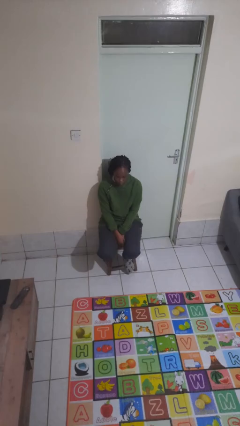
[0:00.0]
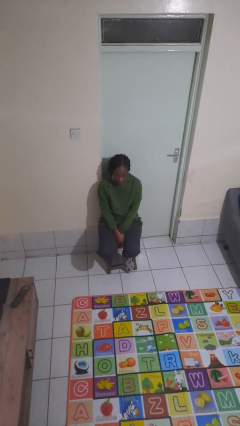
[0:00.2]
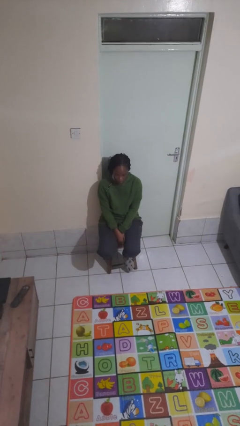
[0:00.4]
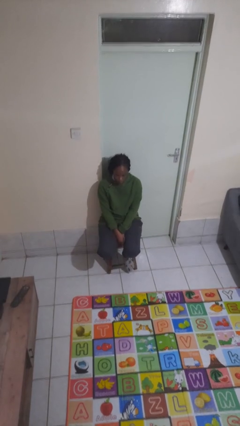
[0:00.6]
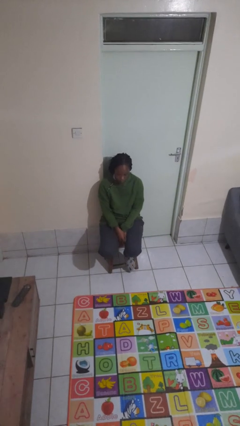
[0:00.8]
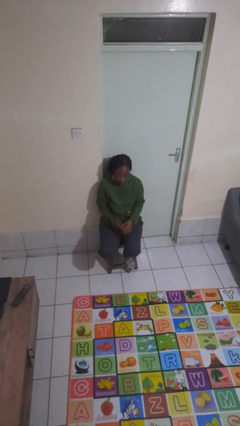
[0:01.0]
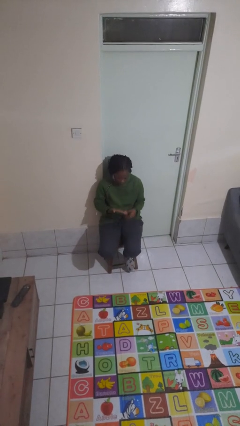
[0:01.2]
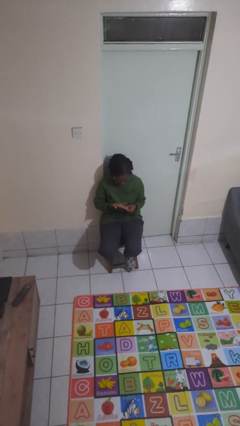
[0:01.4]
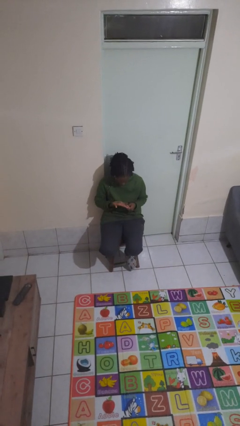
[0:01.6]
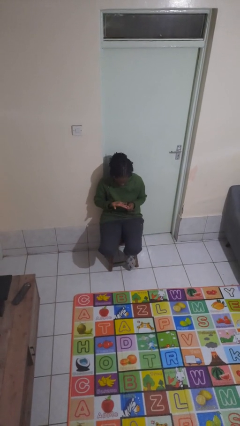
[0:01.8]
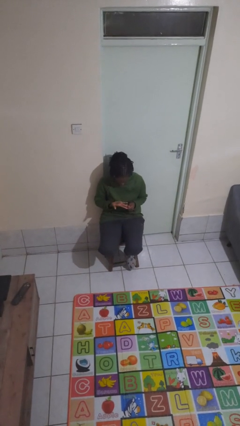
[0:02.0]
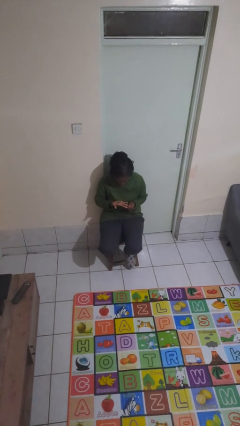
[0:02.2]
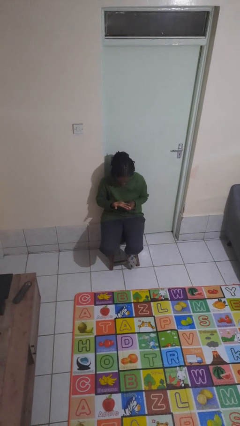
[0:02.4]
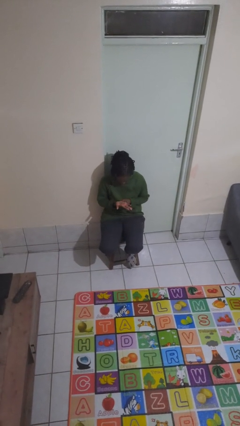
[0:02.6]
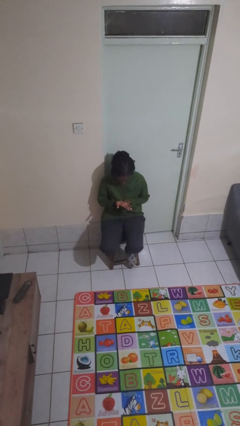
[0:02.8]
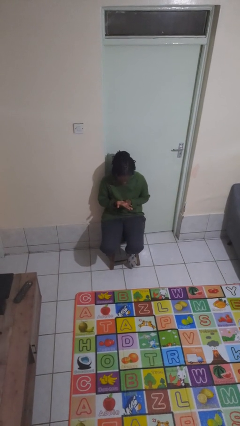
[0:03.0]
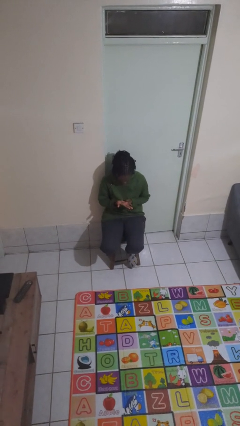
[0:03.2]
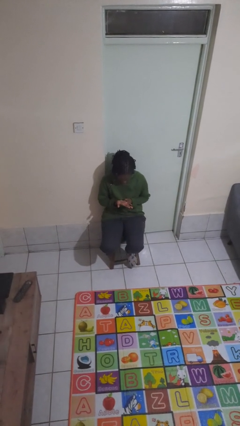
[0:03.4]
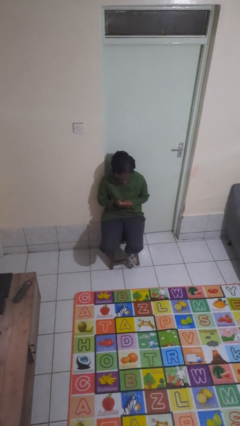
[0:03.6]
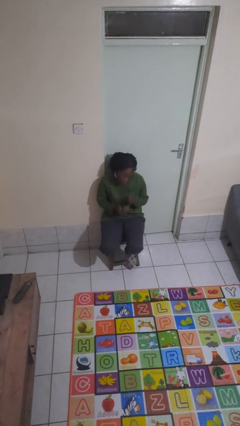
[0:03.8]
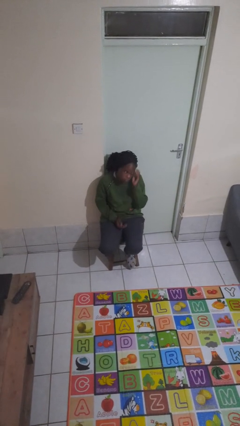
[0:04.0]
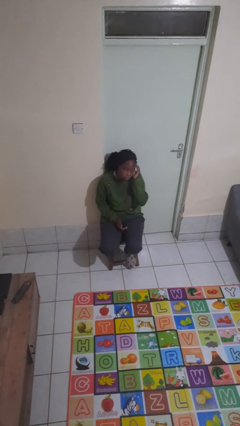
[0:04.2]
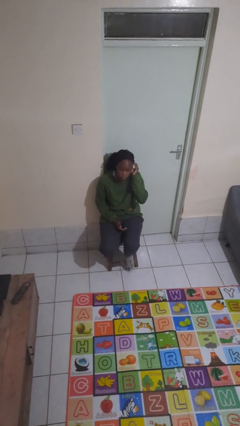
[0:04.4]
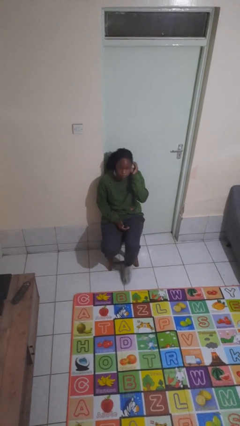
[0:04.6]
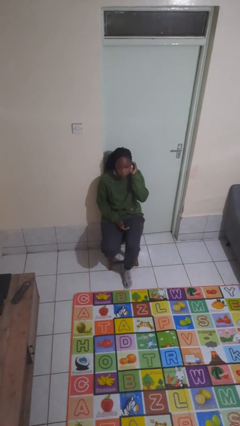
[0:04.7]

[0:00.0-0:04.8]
person looks at hands in lap

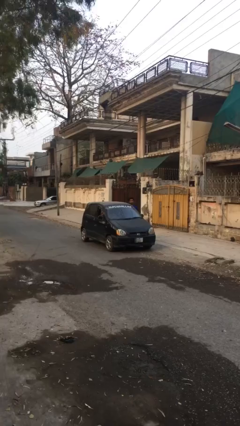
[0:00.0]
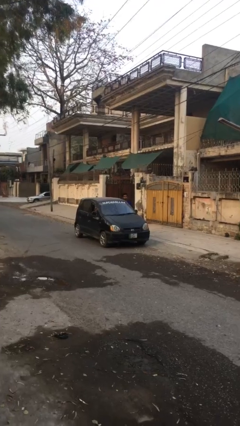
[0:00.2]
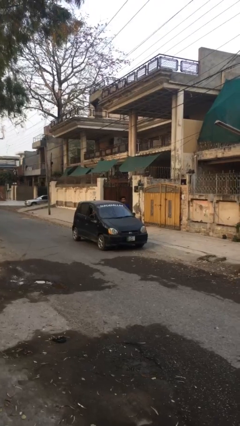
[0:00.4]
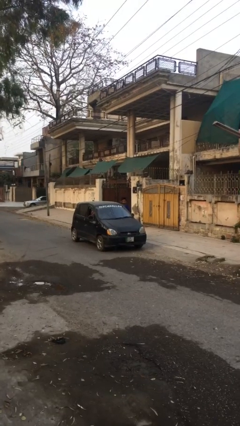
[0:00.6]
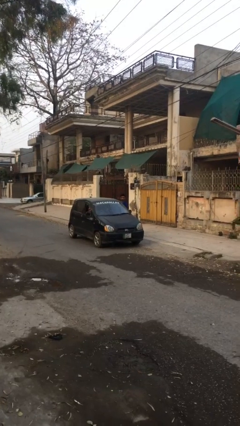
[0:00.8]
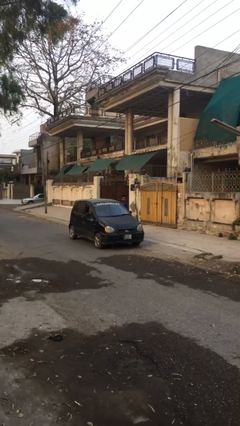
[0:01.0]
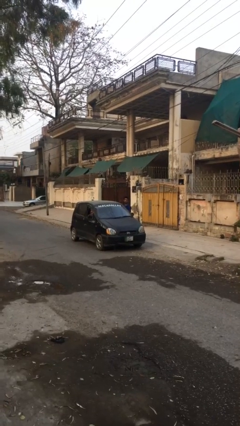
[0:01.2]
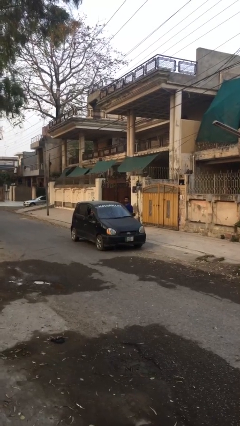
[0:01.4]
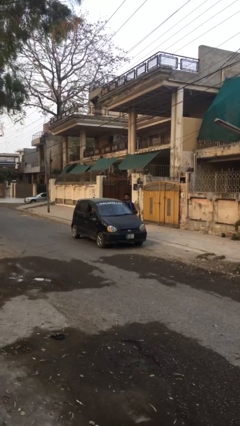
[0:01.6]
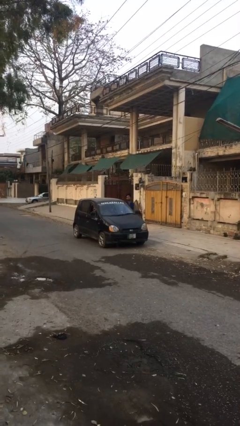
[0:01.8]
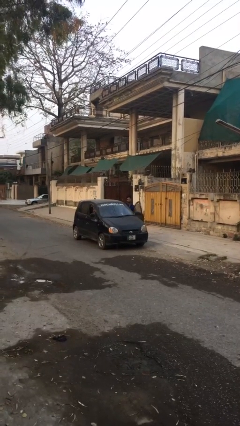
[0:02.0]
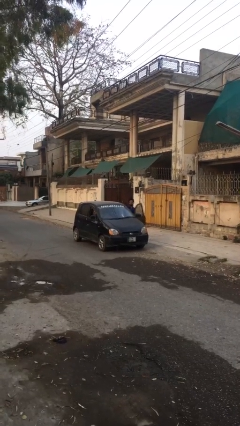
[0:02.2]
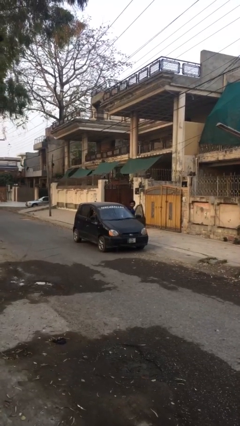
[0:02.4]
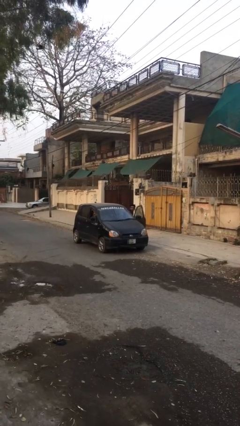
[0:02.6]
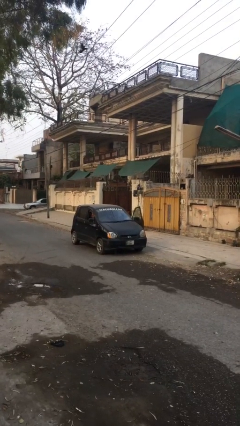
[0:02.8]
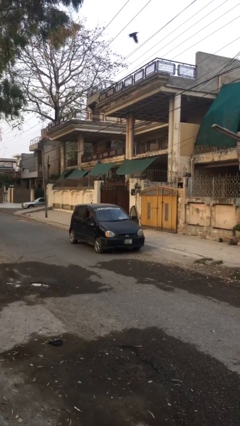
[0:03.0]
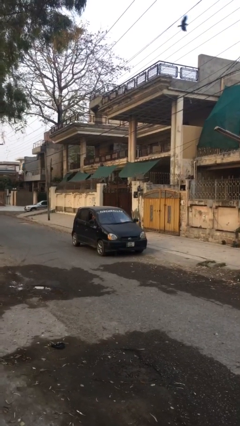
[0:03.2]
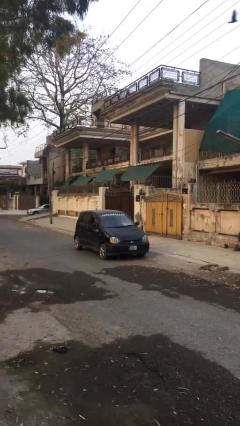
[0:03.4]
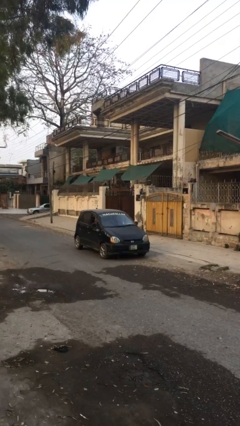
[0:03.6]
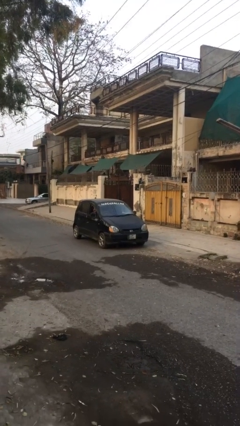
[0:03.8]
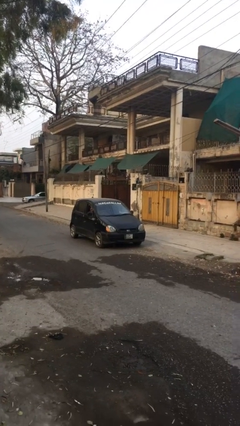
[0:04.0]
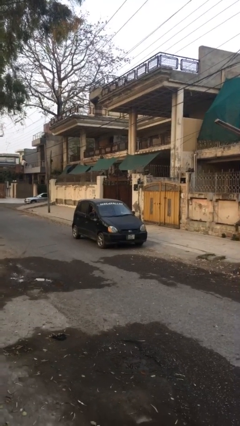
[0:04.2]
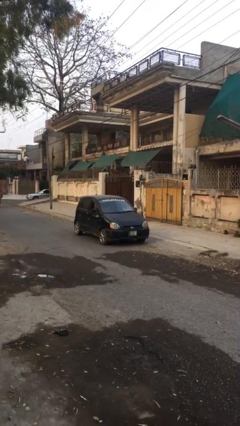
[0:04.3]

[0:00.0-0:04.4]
car picks up person

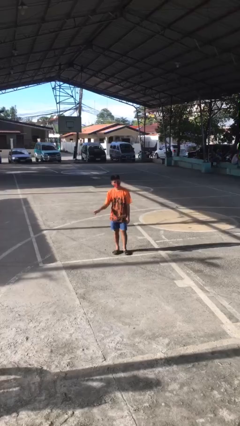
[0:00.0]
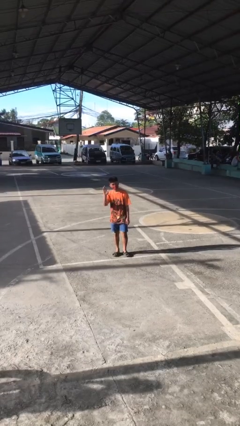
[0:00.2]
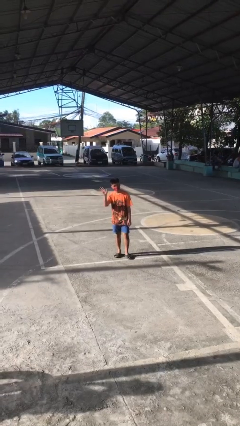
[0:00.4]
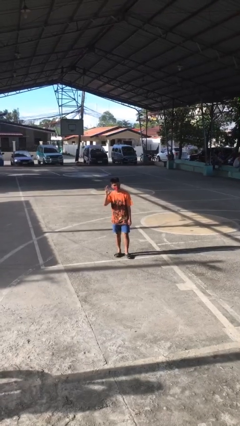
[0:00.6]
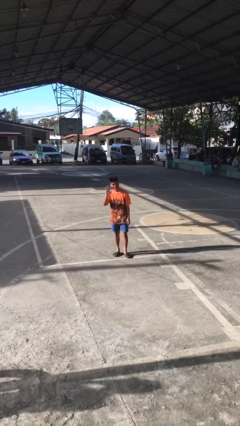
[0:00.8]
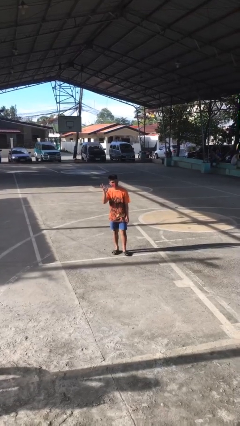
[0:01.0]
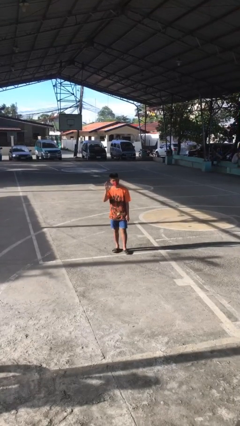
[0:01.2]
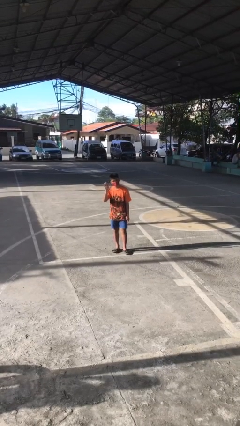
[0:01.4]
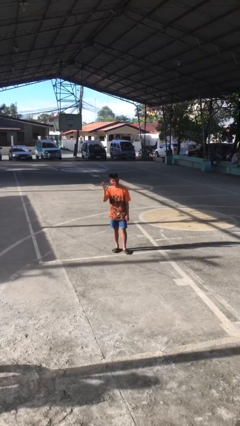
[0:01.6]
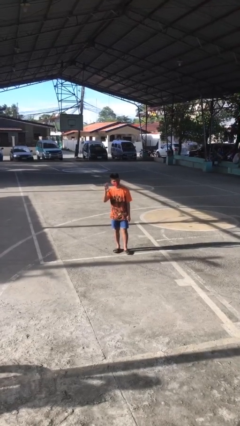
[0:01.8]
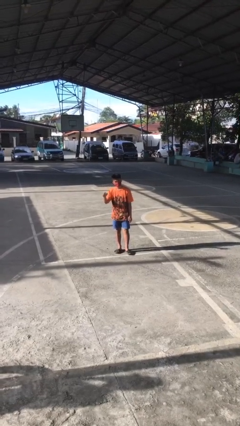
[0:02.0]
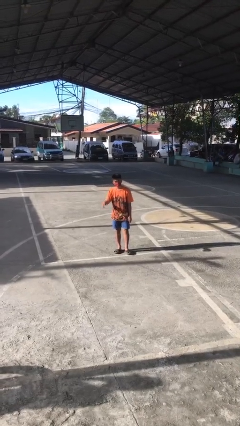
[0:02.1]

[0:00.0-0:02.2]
person waves at person

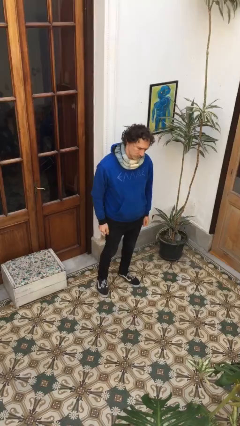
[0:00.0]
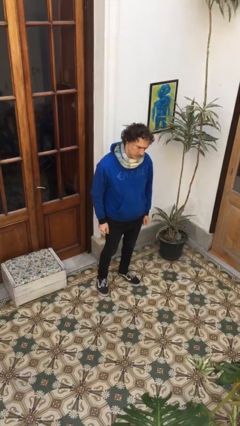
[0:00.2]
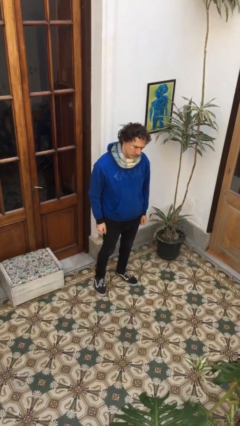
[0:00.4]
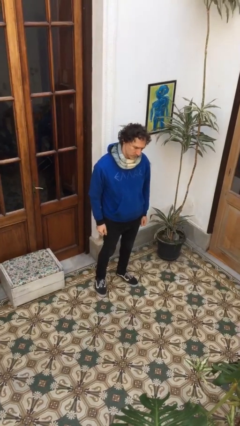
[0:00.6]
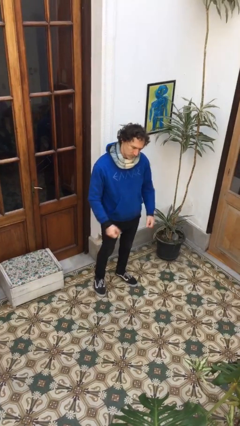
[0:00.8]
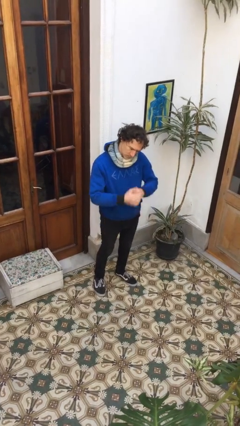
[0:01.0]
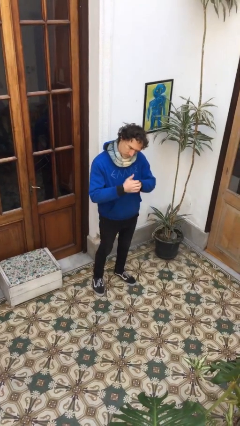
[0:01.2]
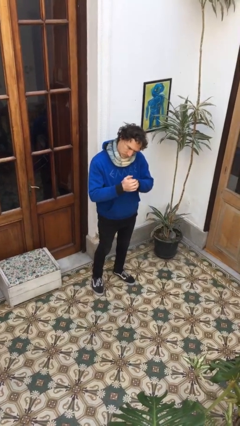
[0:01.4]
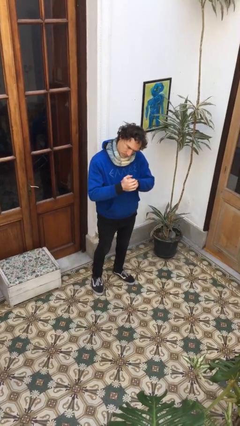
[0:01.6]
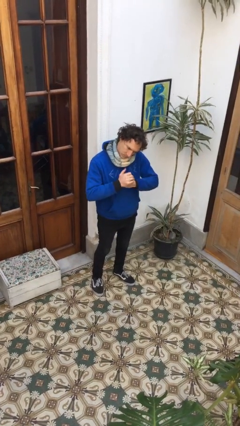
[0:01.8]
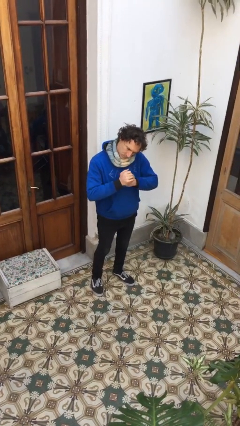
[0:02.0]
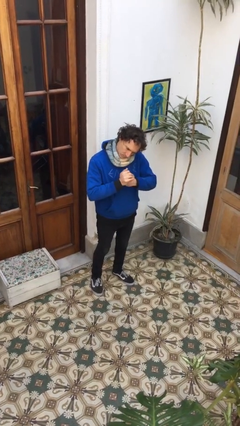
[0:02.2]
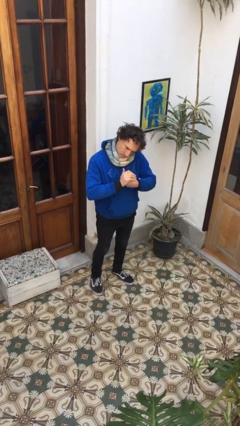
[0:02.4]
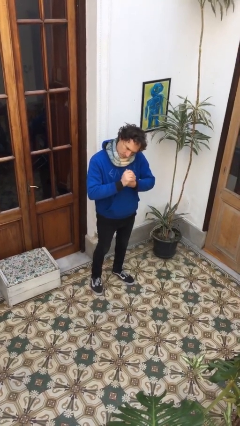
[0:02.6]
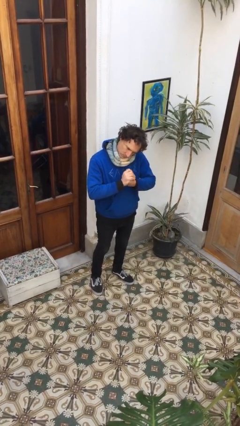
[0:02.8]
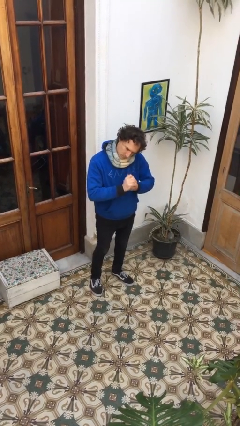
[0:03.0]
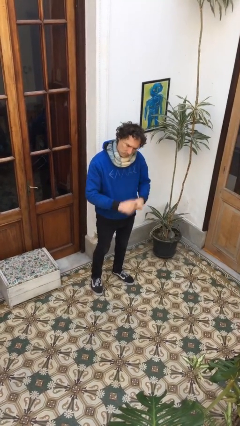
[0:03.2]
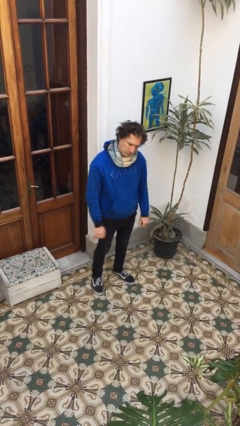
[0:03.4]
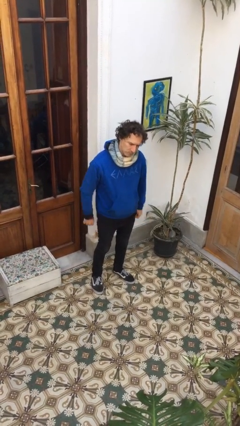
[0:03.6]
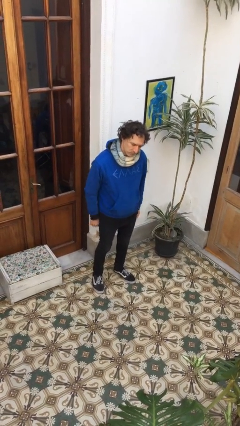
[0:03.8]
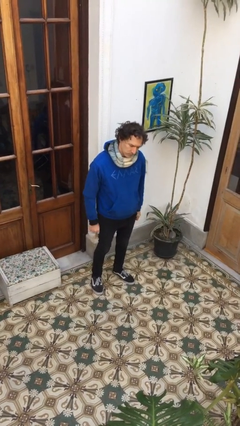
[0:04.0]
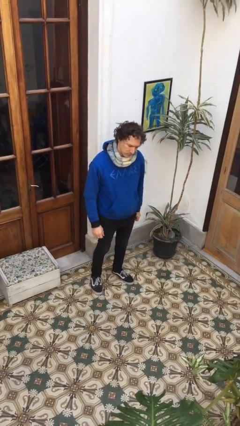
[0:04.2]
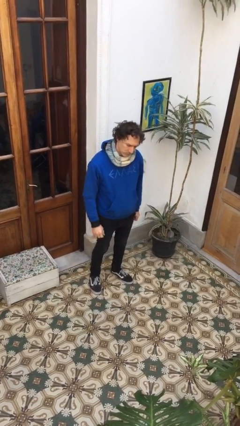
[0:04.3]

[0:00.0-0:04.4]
person cracks knuckles

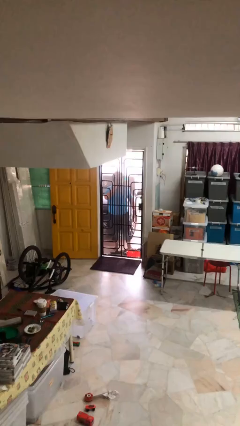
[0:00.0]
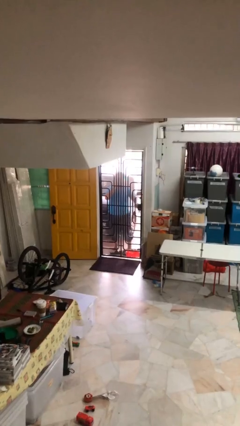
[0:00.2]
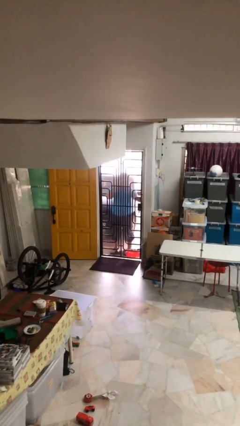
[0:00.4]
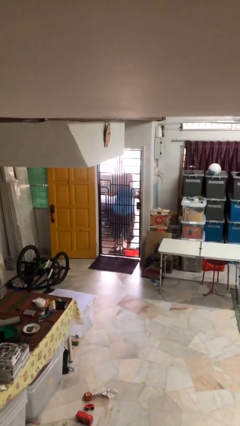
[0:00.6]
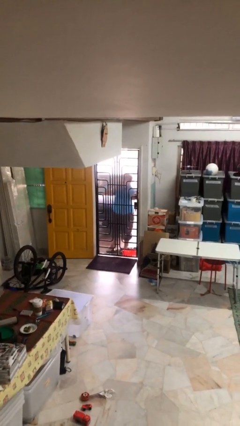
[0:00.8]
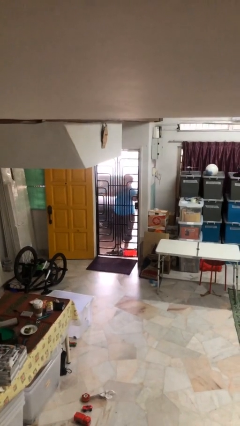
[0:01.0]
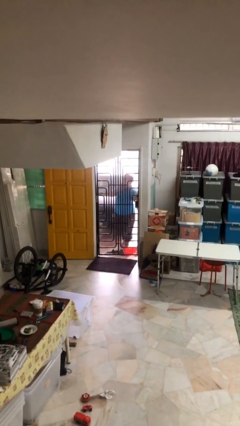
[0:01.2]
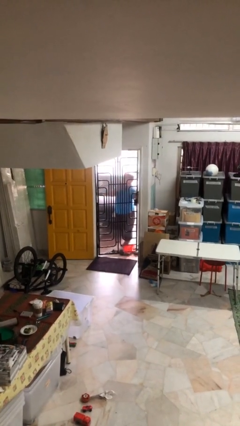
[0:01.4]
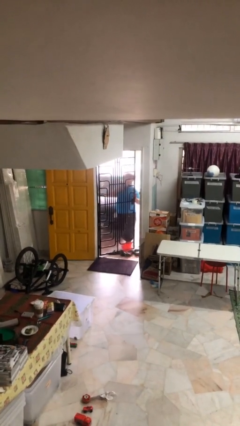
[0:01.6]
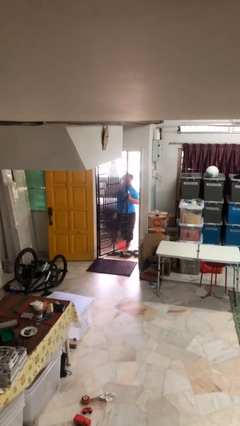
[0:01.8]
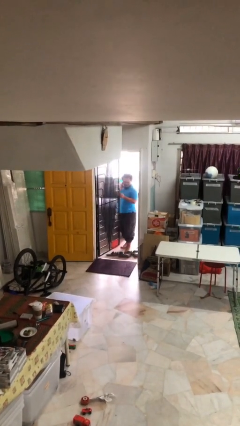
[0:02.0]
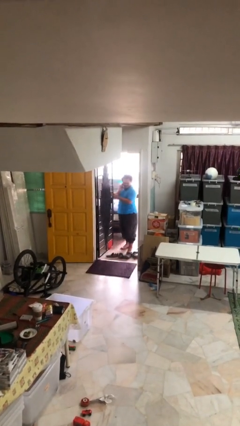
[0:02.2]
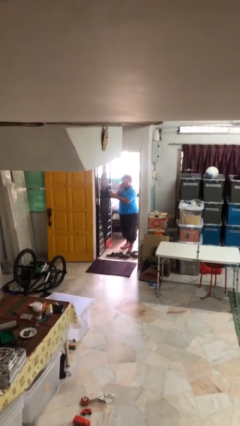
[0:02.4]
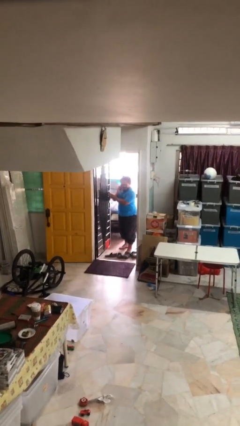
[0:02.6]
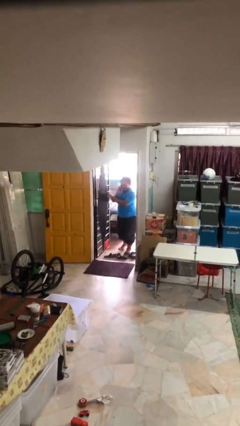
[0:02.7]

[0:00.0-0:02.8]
person opens facility door
